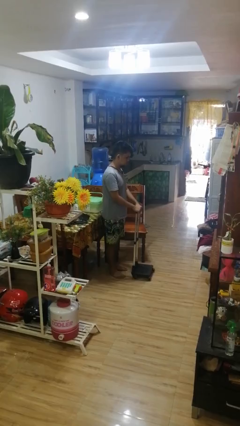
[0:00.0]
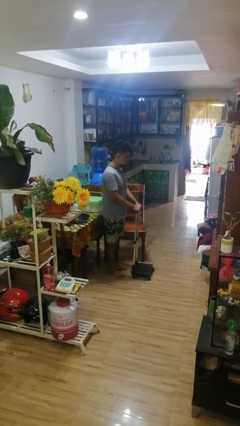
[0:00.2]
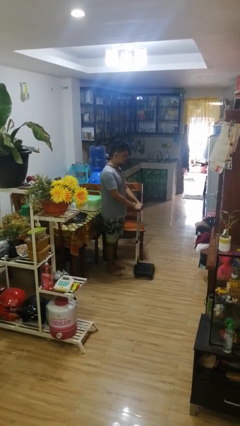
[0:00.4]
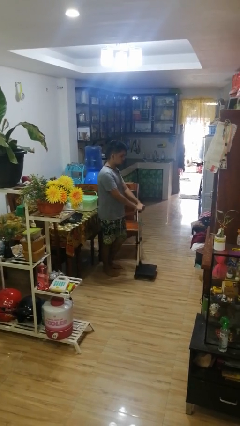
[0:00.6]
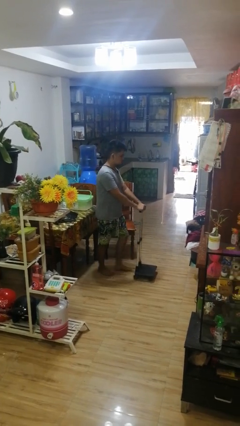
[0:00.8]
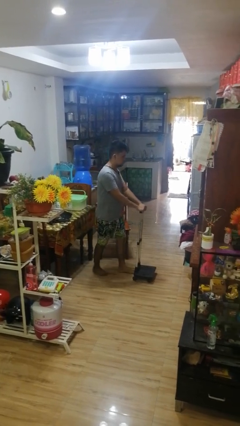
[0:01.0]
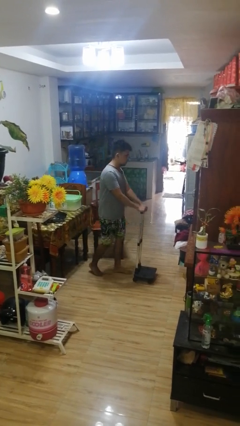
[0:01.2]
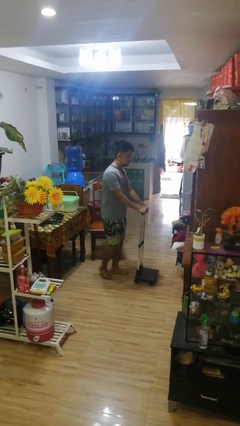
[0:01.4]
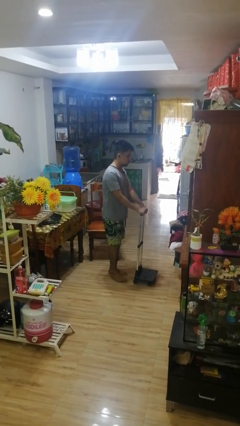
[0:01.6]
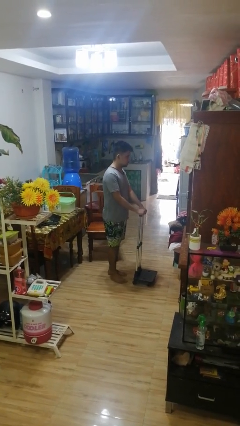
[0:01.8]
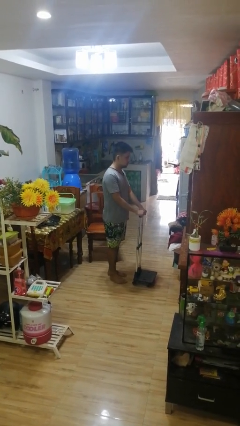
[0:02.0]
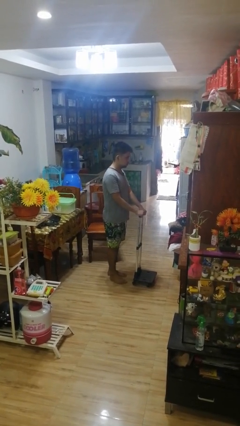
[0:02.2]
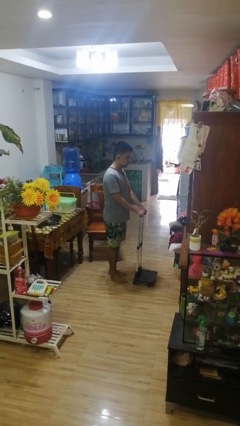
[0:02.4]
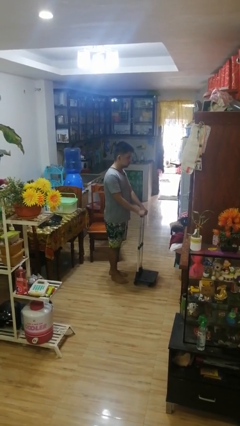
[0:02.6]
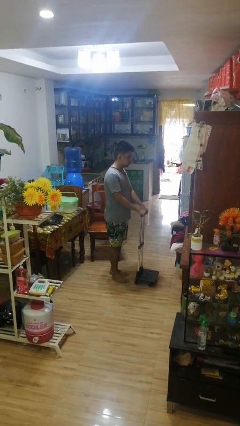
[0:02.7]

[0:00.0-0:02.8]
person pushes wheeled cart

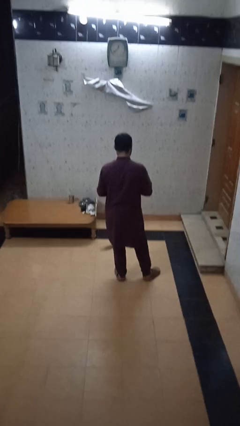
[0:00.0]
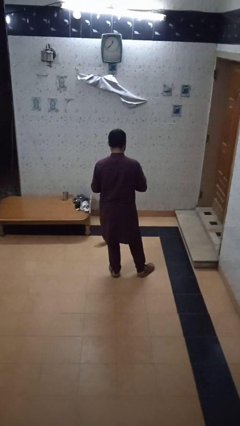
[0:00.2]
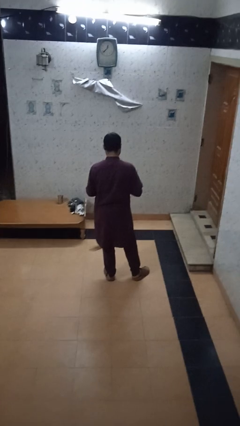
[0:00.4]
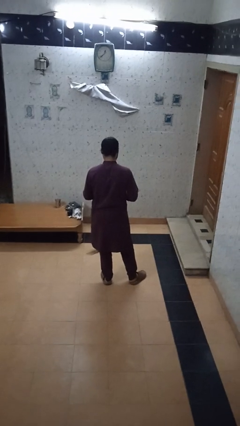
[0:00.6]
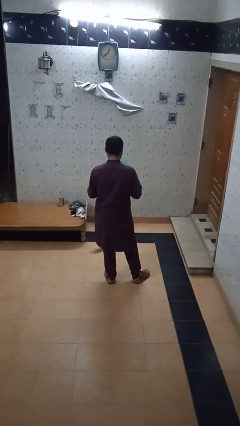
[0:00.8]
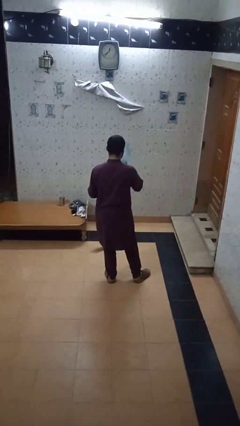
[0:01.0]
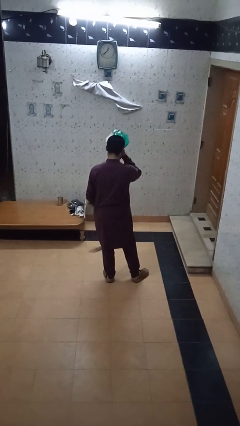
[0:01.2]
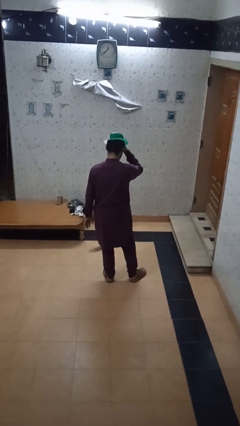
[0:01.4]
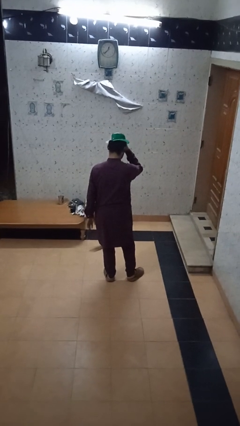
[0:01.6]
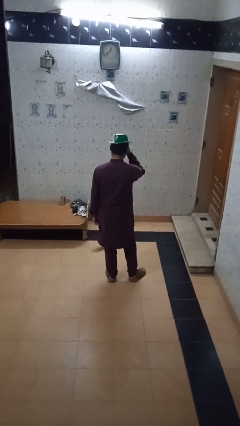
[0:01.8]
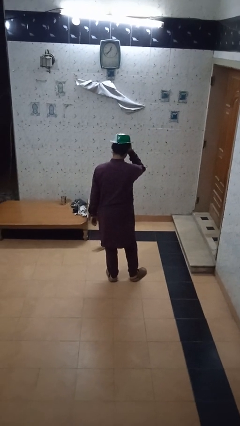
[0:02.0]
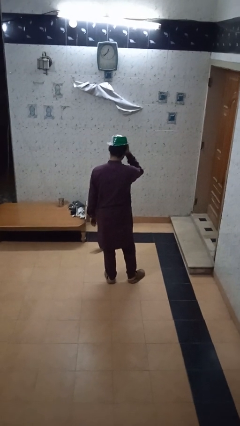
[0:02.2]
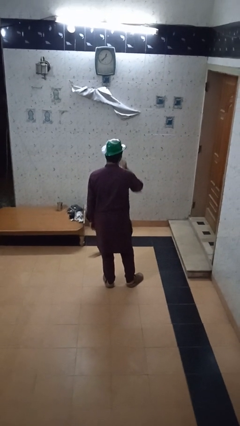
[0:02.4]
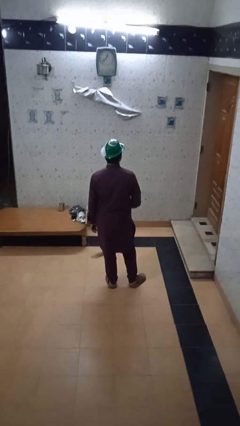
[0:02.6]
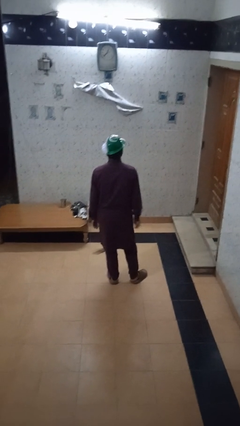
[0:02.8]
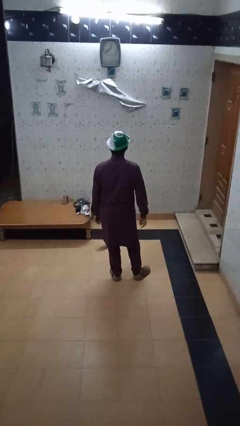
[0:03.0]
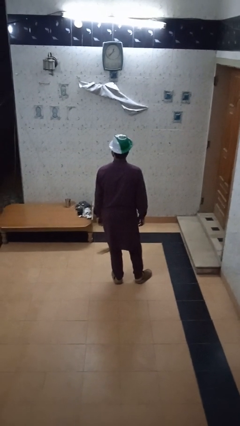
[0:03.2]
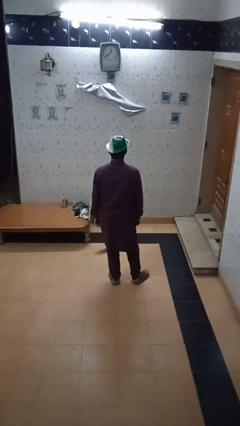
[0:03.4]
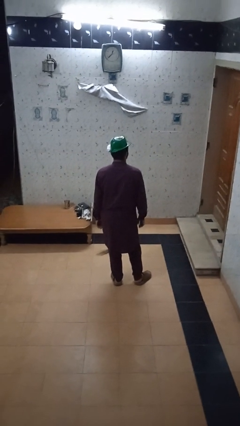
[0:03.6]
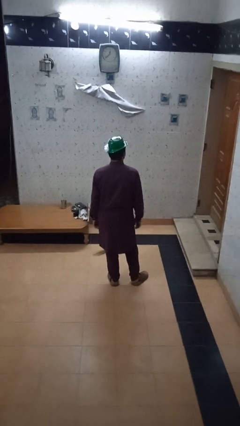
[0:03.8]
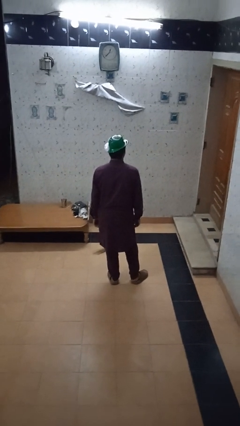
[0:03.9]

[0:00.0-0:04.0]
person puts on hat

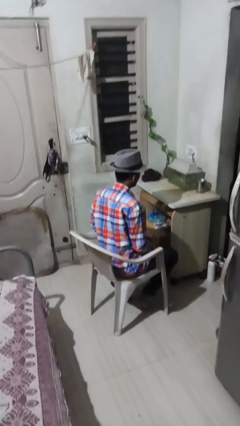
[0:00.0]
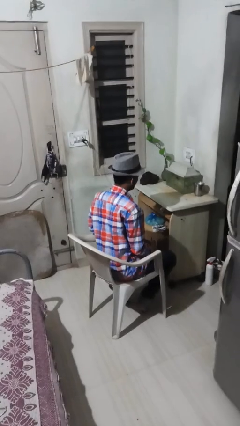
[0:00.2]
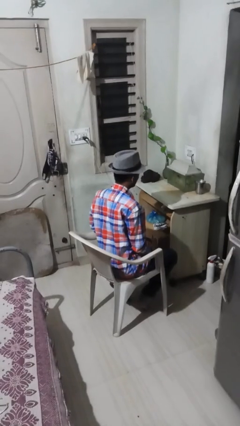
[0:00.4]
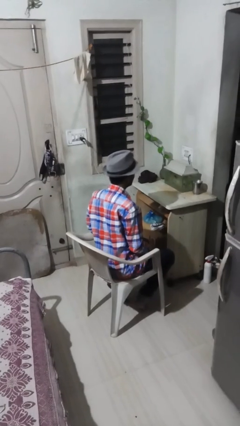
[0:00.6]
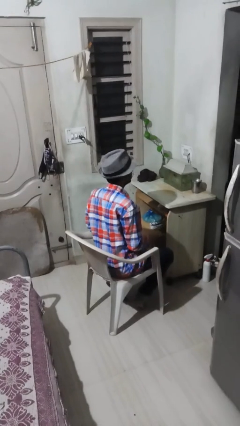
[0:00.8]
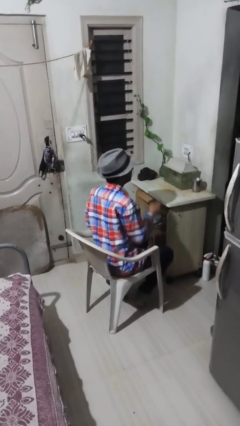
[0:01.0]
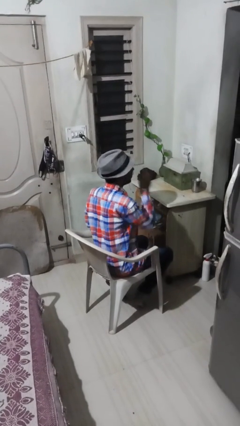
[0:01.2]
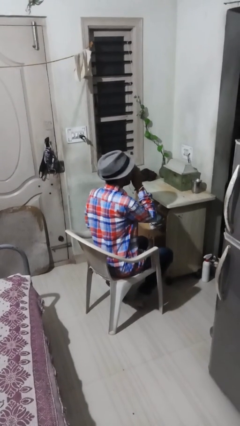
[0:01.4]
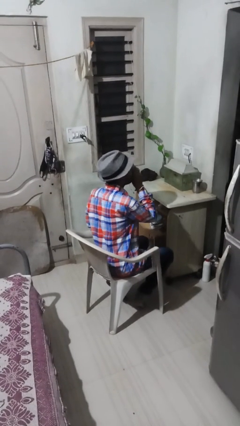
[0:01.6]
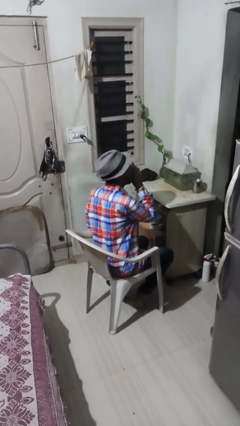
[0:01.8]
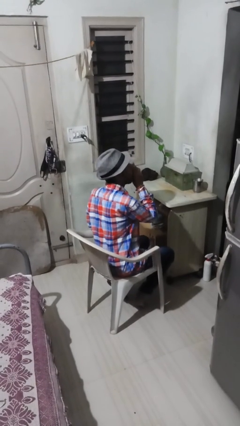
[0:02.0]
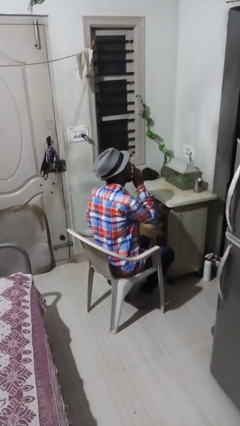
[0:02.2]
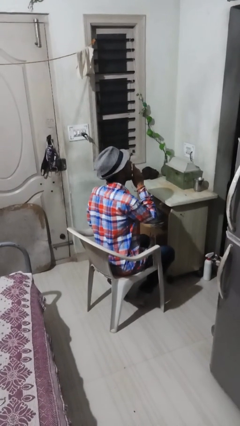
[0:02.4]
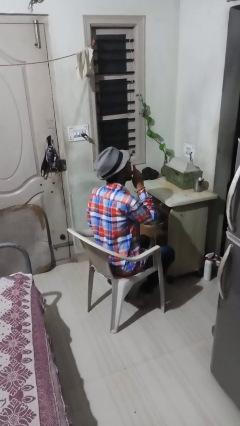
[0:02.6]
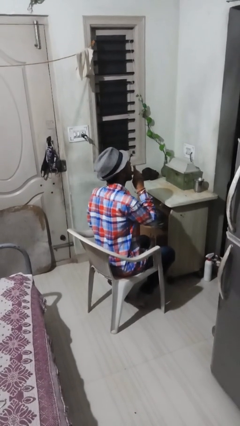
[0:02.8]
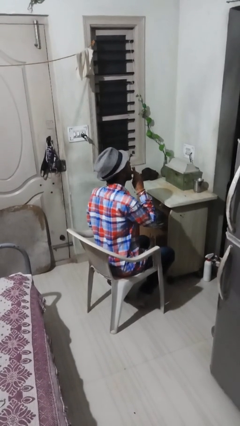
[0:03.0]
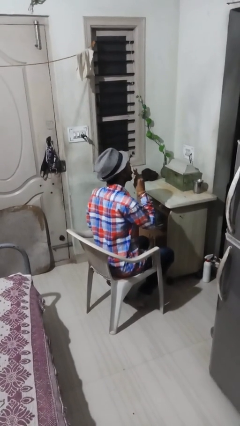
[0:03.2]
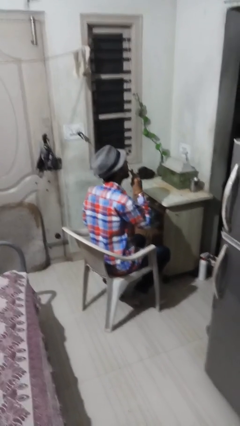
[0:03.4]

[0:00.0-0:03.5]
person licks fingers

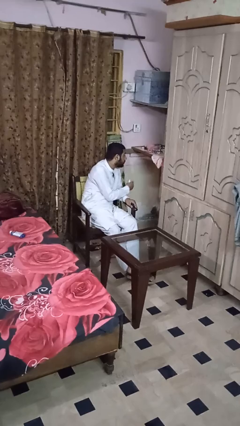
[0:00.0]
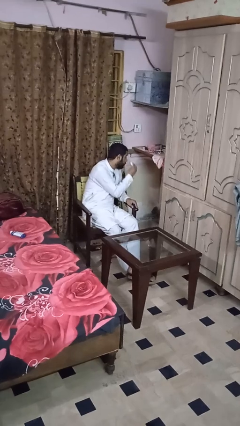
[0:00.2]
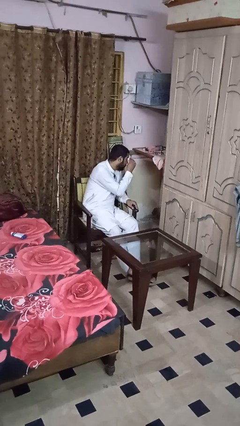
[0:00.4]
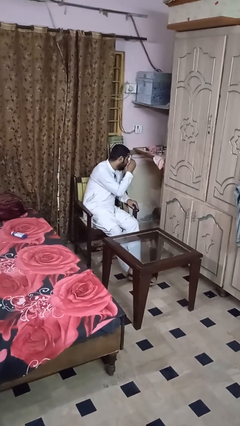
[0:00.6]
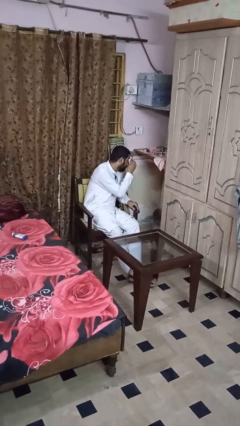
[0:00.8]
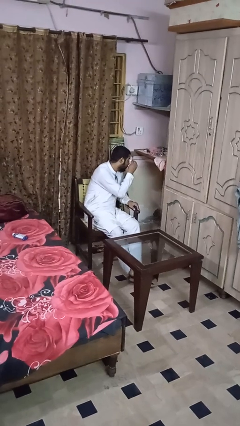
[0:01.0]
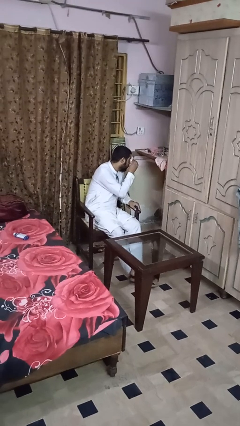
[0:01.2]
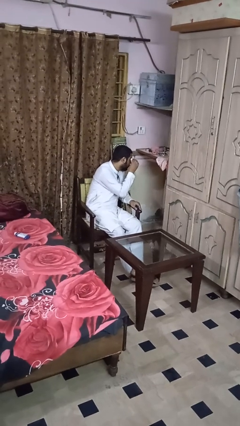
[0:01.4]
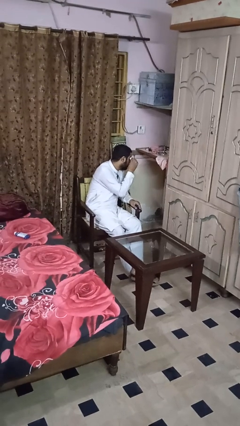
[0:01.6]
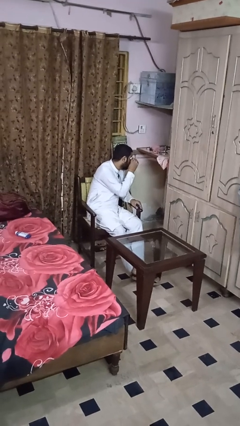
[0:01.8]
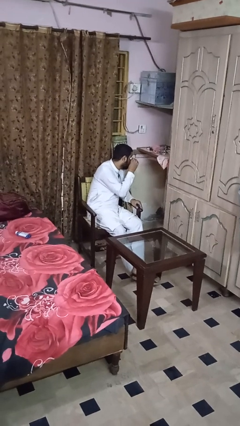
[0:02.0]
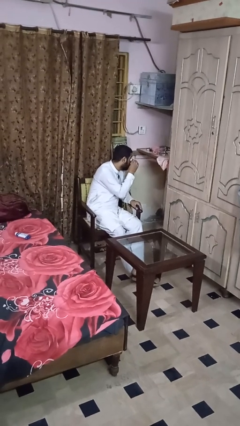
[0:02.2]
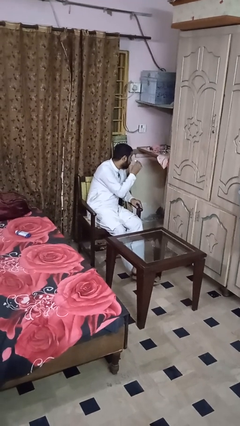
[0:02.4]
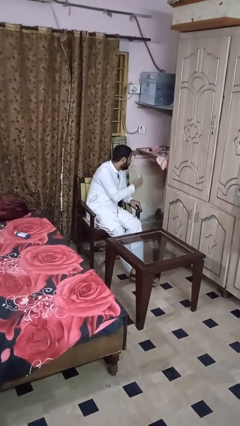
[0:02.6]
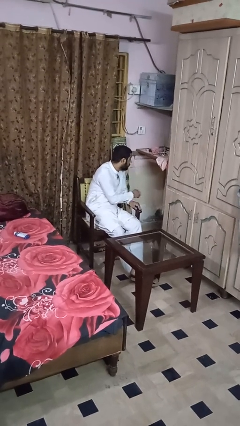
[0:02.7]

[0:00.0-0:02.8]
person applies eye makeup

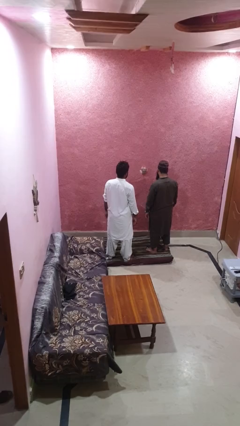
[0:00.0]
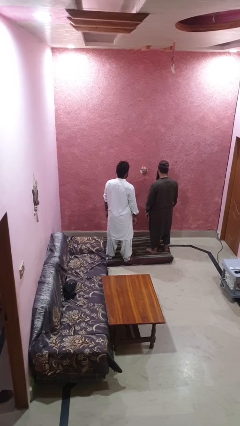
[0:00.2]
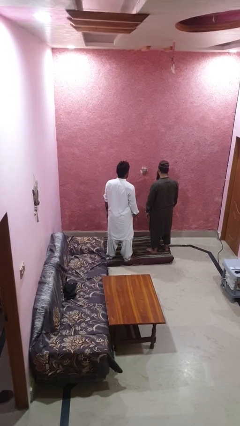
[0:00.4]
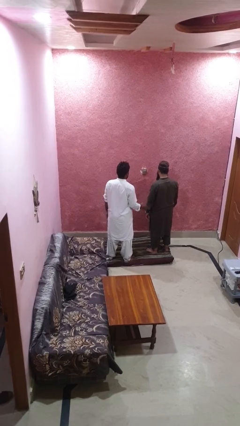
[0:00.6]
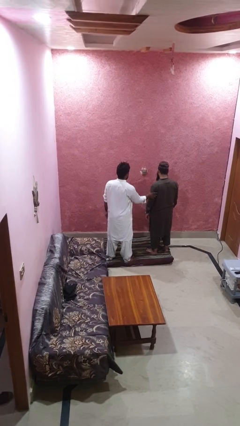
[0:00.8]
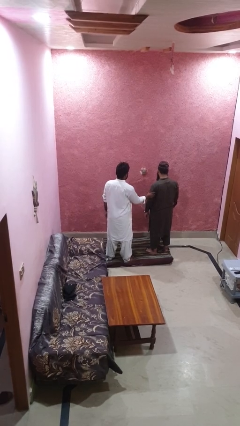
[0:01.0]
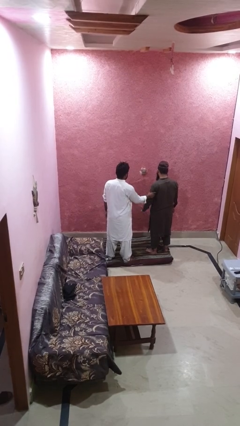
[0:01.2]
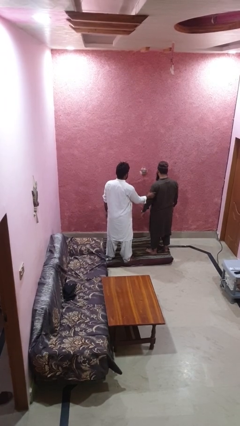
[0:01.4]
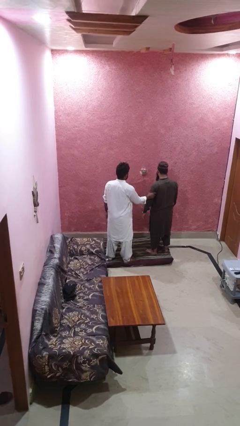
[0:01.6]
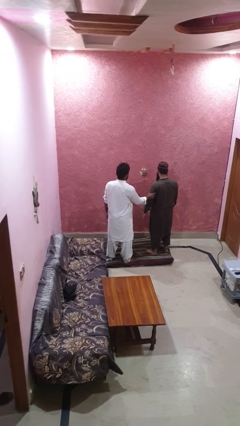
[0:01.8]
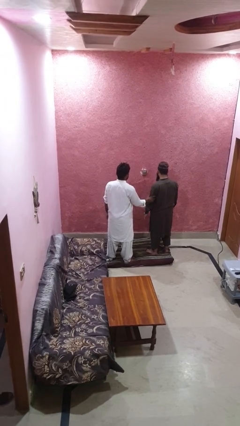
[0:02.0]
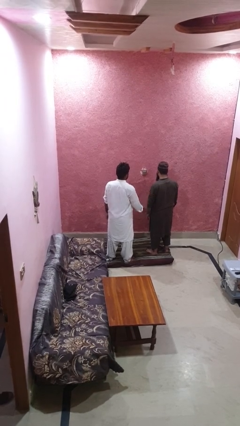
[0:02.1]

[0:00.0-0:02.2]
person grabs person by bicep

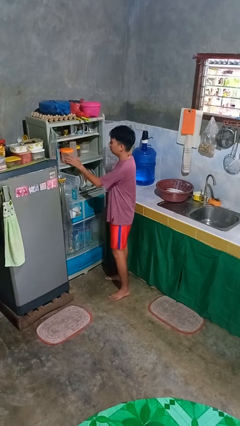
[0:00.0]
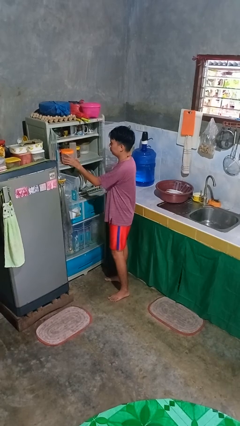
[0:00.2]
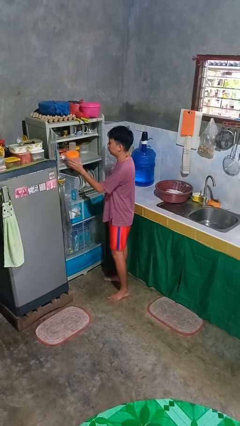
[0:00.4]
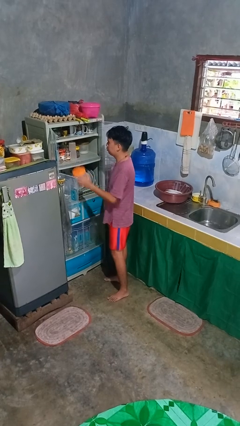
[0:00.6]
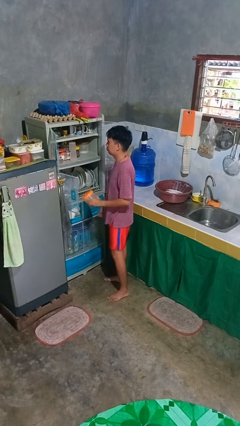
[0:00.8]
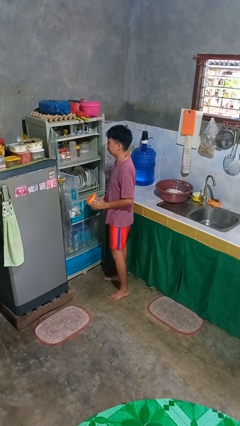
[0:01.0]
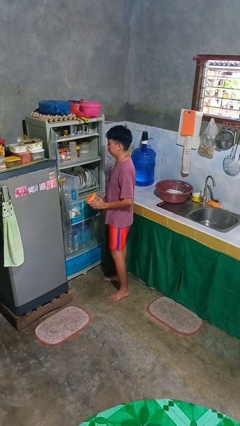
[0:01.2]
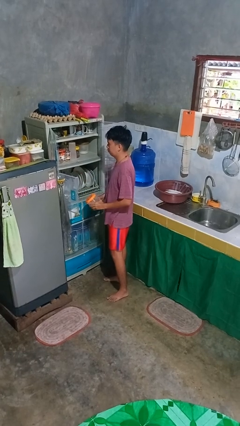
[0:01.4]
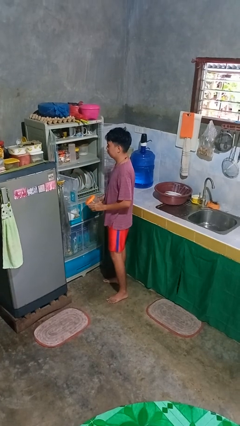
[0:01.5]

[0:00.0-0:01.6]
person takes object from cabinet

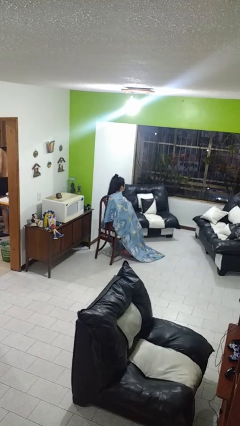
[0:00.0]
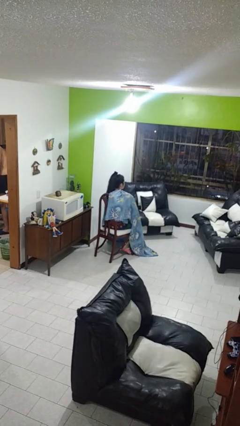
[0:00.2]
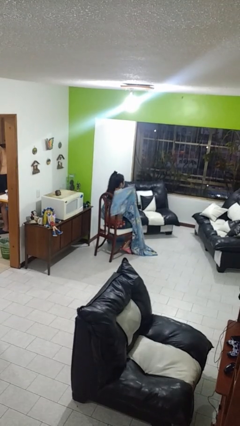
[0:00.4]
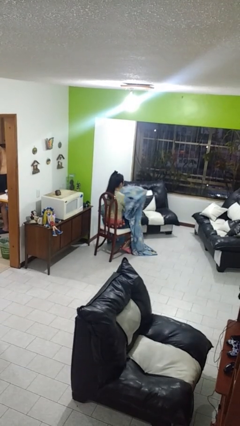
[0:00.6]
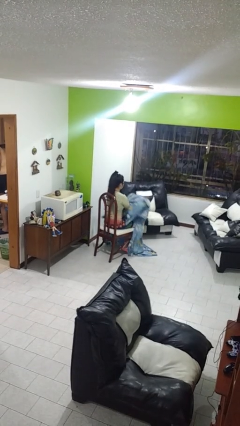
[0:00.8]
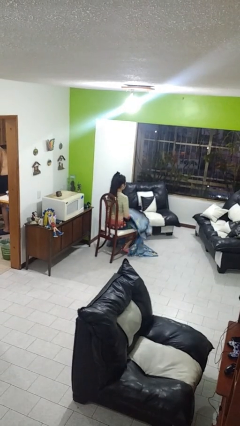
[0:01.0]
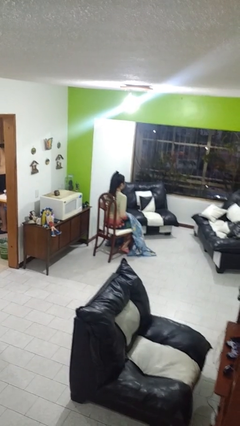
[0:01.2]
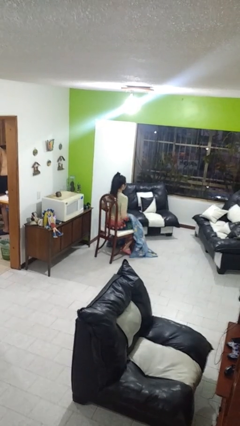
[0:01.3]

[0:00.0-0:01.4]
person uncovers with blanket
